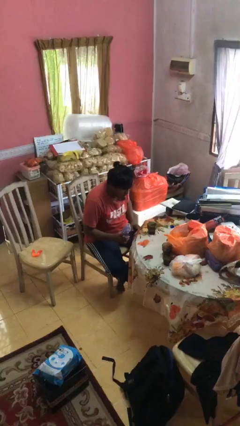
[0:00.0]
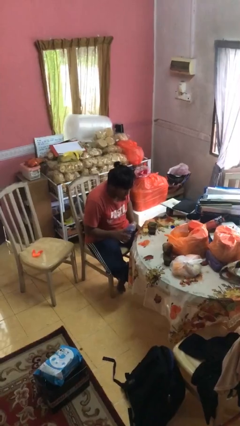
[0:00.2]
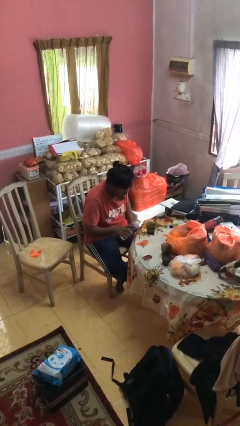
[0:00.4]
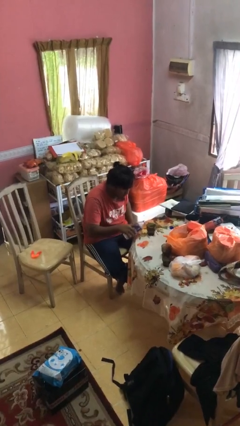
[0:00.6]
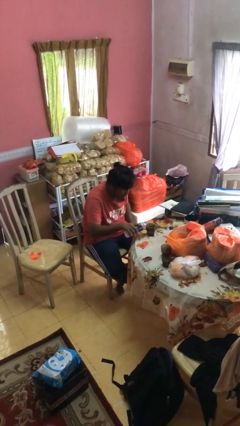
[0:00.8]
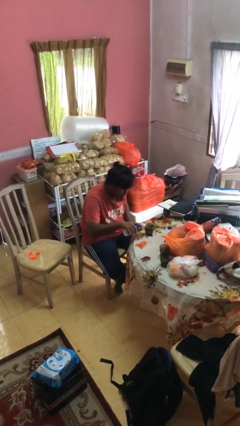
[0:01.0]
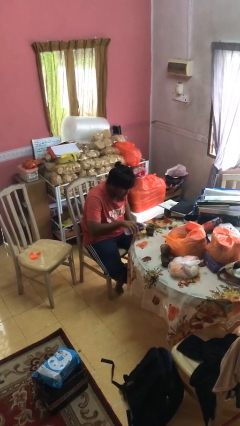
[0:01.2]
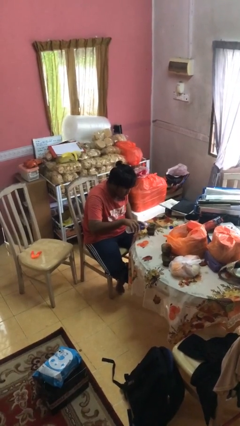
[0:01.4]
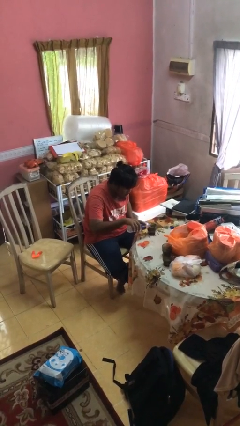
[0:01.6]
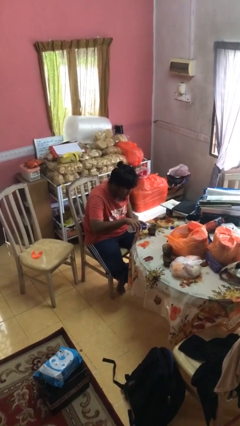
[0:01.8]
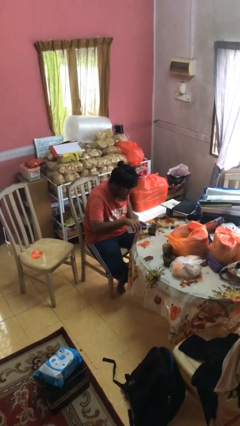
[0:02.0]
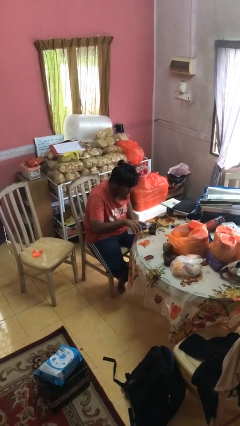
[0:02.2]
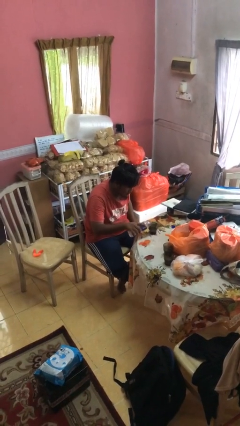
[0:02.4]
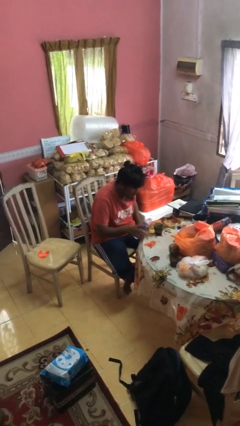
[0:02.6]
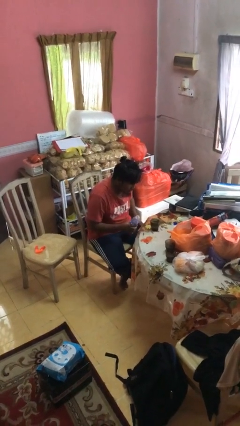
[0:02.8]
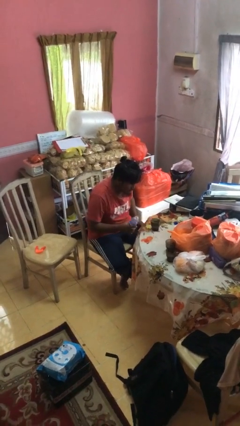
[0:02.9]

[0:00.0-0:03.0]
person pours liquid into cup

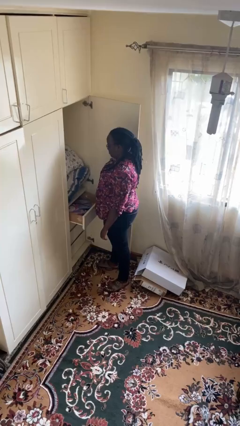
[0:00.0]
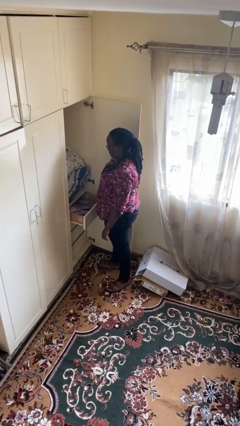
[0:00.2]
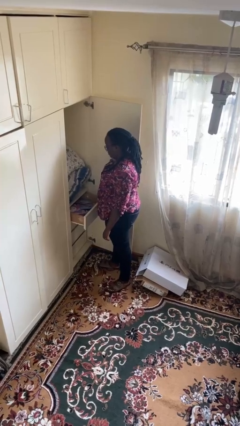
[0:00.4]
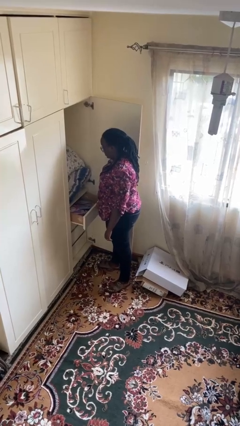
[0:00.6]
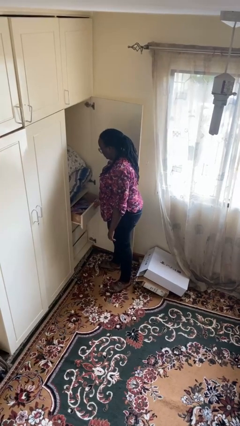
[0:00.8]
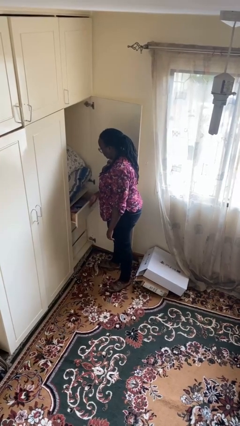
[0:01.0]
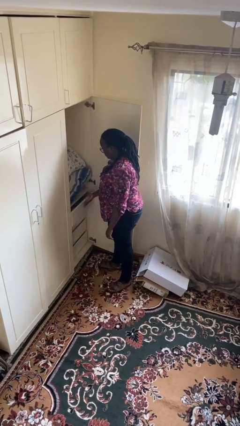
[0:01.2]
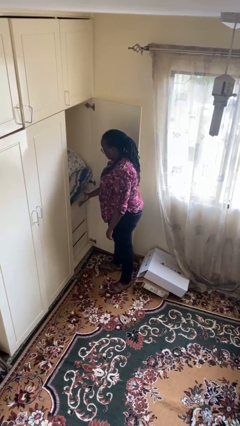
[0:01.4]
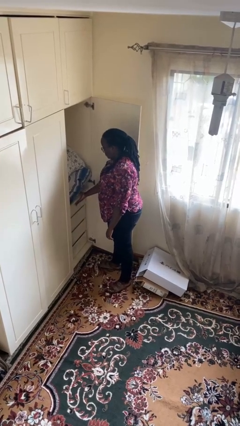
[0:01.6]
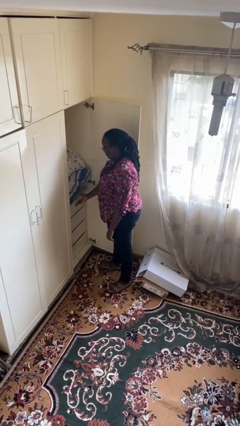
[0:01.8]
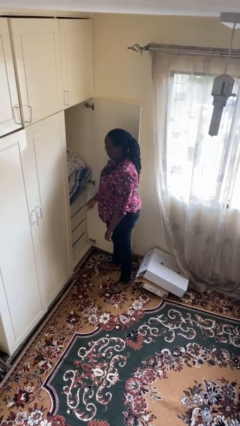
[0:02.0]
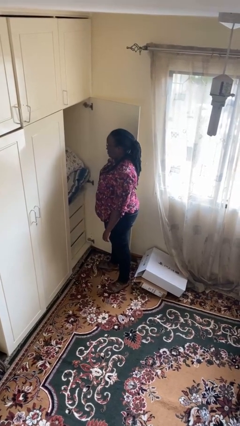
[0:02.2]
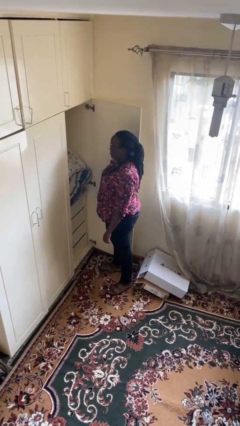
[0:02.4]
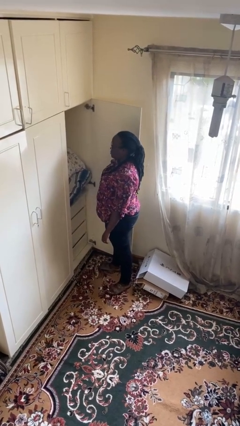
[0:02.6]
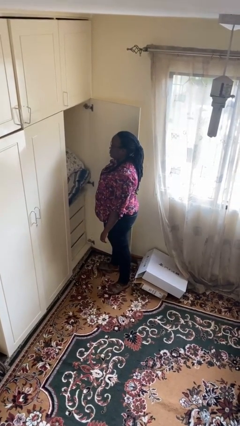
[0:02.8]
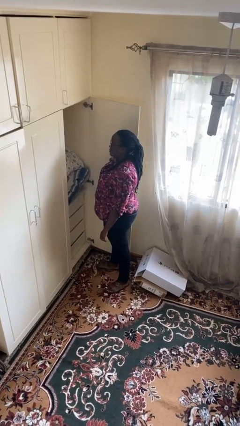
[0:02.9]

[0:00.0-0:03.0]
person closes dresser drawer

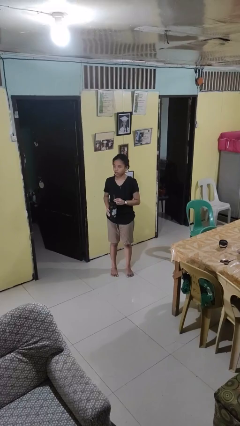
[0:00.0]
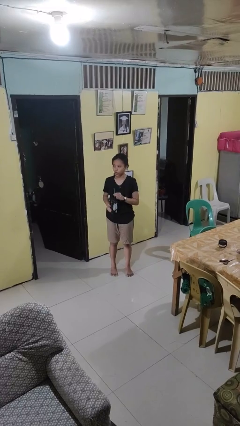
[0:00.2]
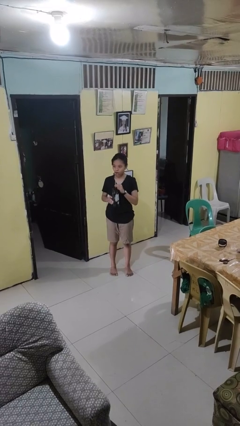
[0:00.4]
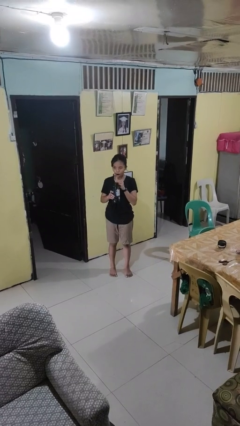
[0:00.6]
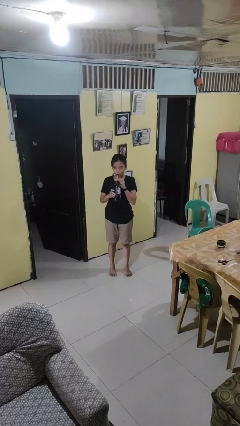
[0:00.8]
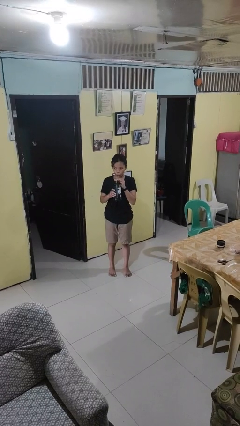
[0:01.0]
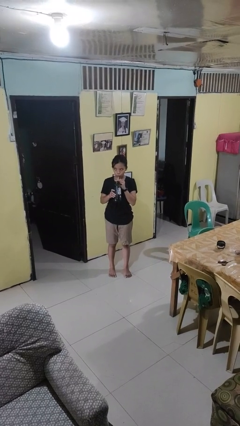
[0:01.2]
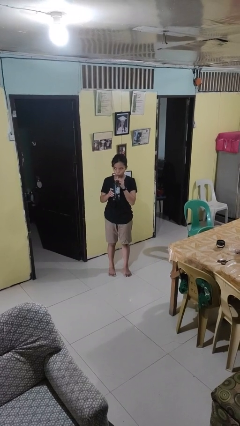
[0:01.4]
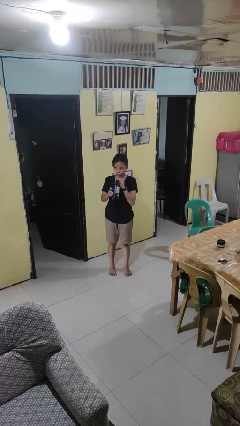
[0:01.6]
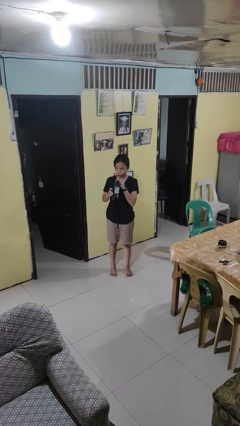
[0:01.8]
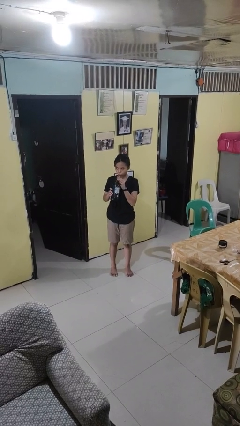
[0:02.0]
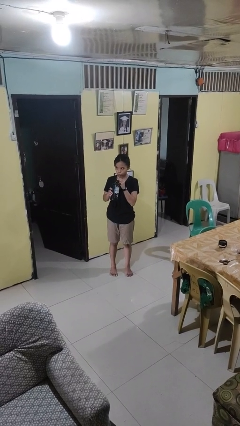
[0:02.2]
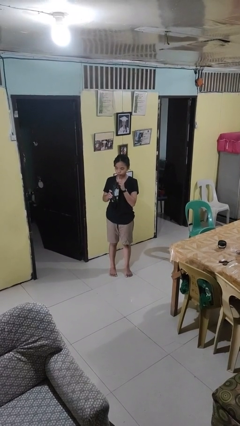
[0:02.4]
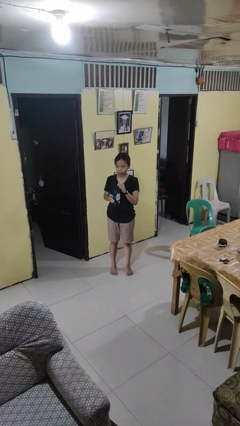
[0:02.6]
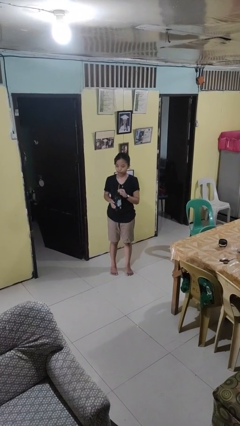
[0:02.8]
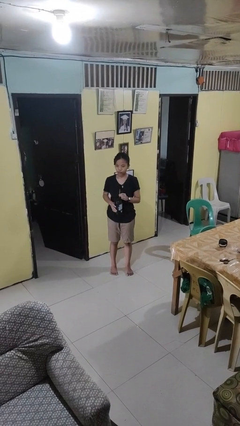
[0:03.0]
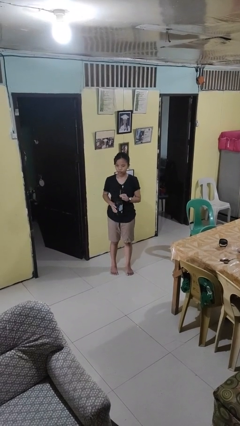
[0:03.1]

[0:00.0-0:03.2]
person drinks from straw

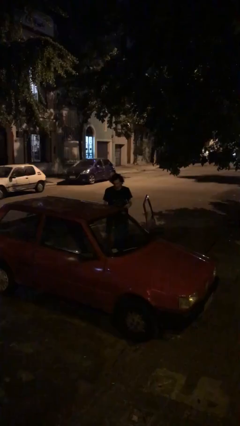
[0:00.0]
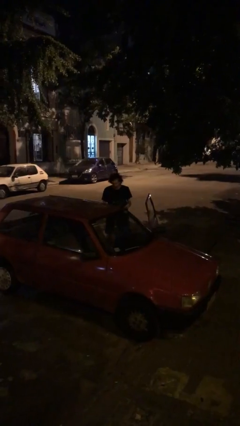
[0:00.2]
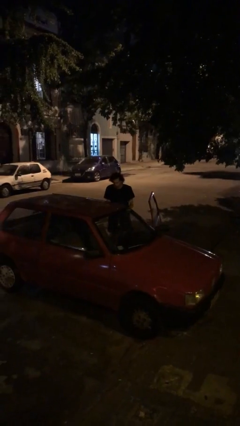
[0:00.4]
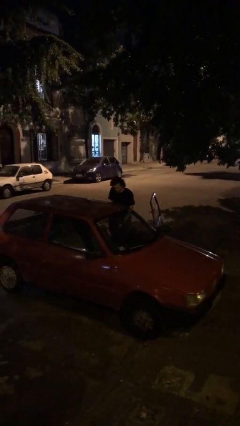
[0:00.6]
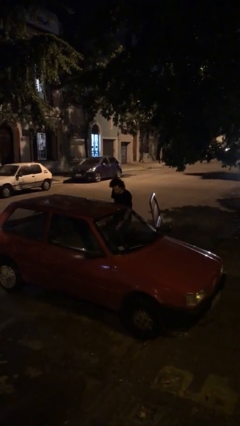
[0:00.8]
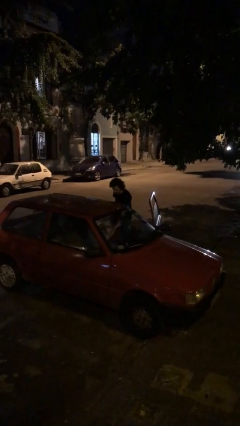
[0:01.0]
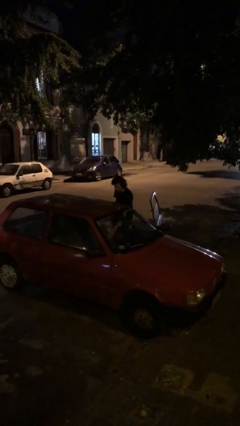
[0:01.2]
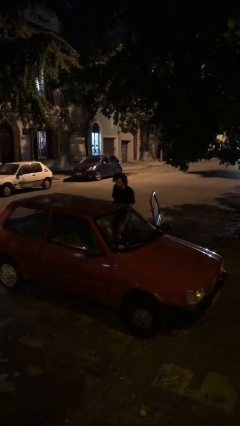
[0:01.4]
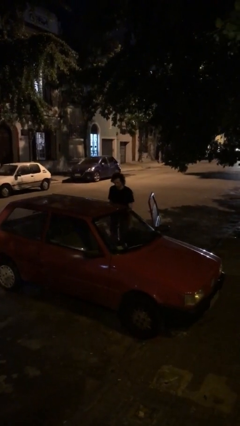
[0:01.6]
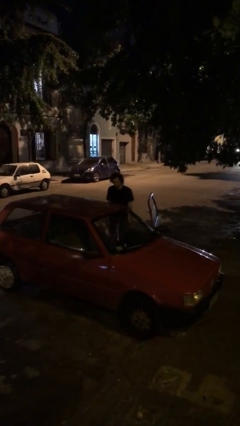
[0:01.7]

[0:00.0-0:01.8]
person loads car

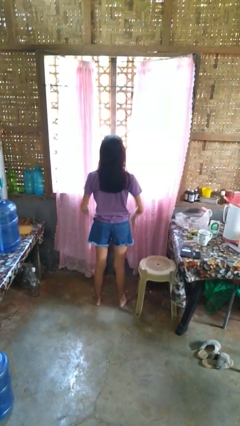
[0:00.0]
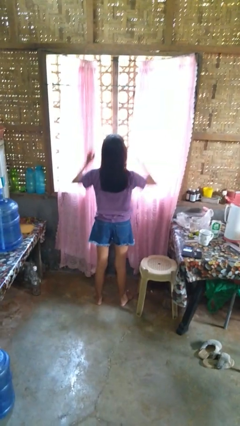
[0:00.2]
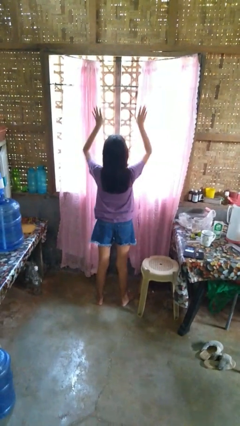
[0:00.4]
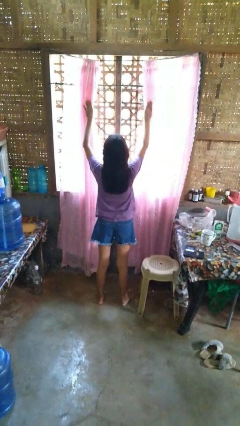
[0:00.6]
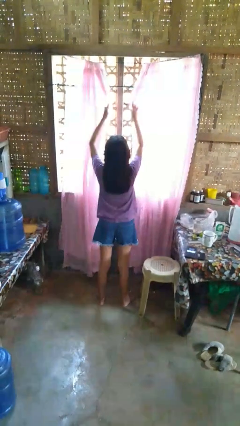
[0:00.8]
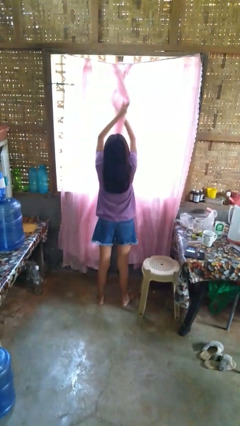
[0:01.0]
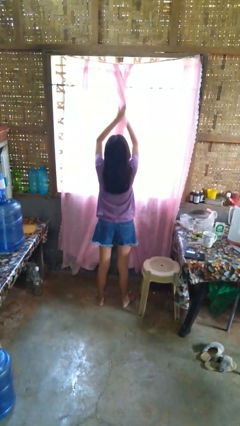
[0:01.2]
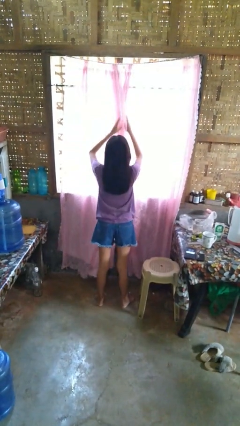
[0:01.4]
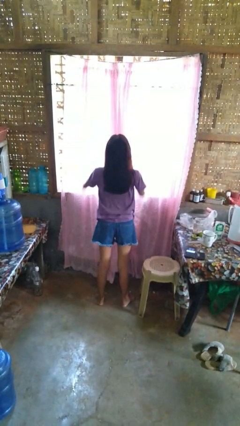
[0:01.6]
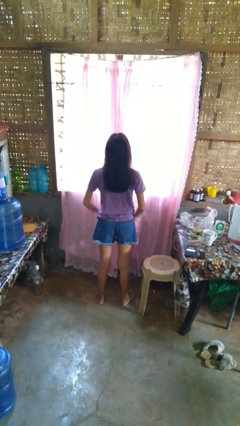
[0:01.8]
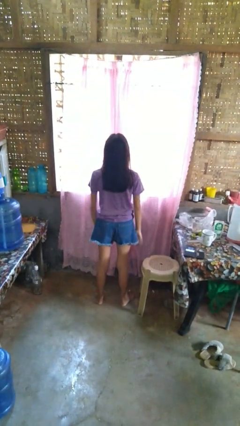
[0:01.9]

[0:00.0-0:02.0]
person closes curtains

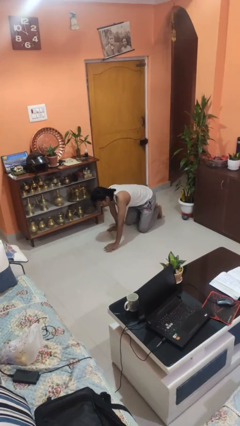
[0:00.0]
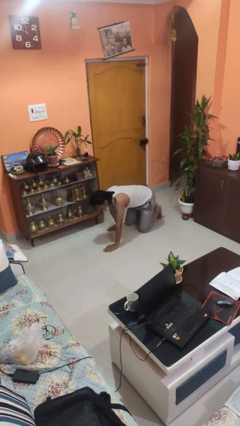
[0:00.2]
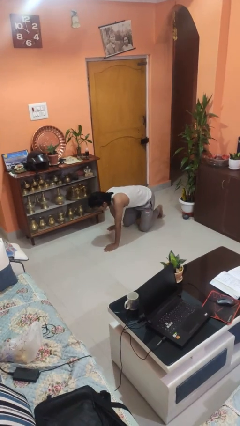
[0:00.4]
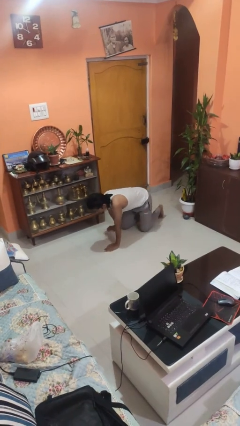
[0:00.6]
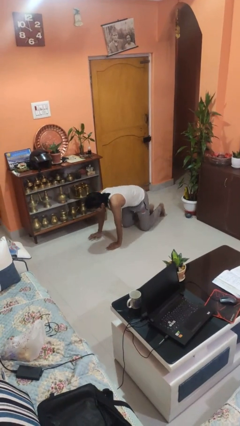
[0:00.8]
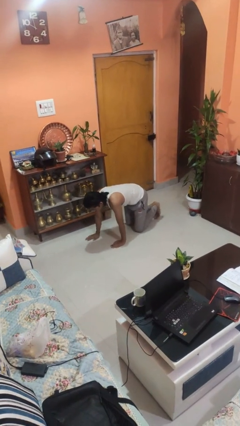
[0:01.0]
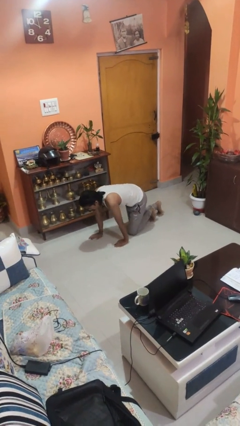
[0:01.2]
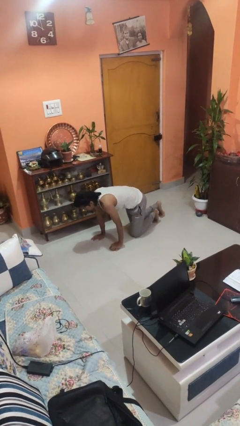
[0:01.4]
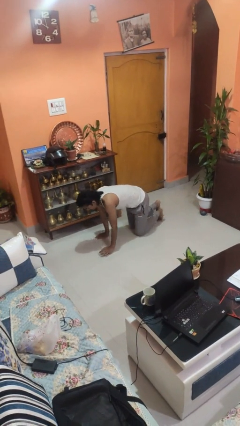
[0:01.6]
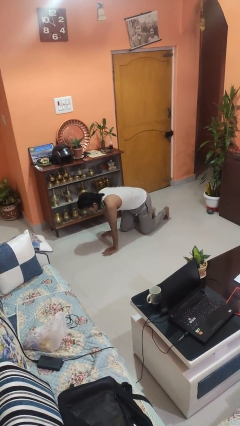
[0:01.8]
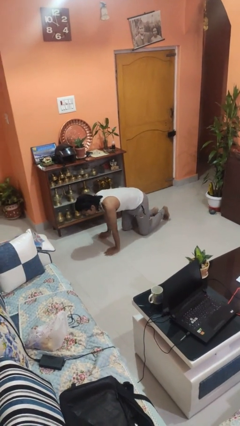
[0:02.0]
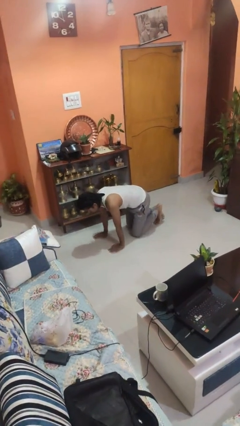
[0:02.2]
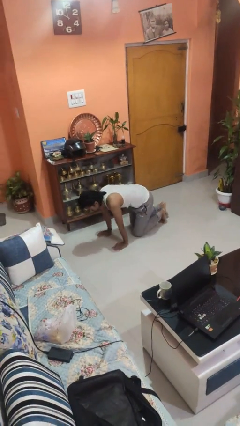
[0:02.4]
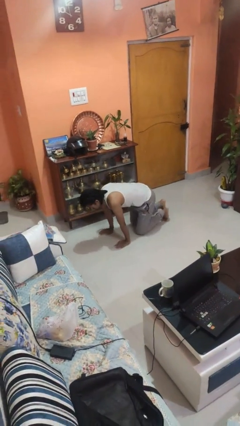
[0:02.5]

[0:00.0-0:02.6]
person crawls

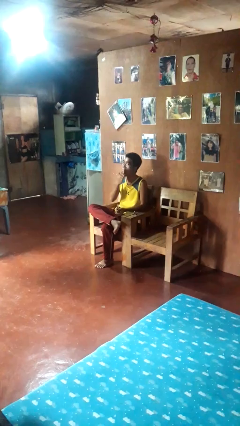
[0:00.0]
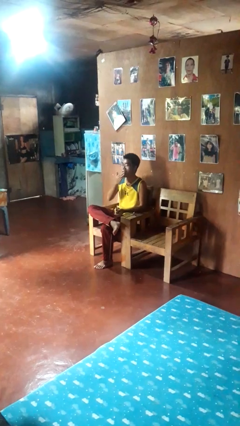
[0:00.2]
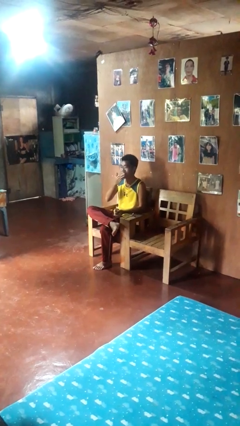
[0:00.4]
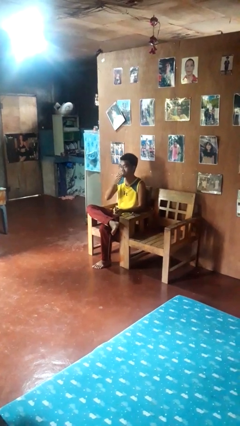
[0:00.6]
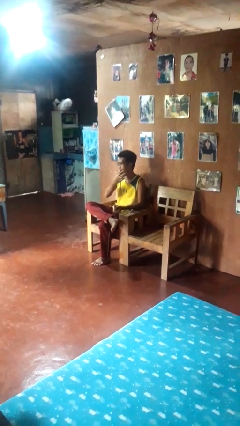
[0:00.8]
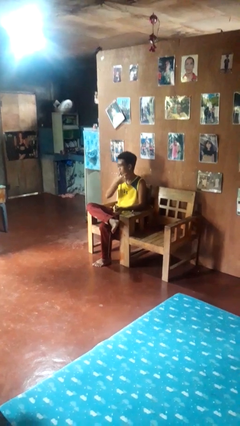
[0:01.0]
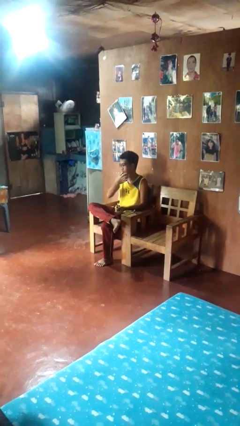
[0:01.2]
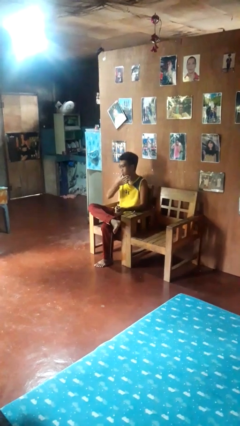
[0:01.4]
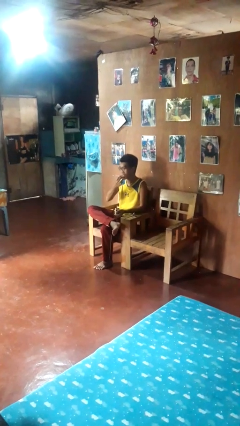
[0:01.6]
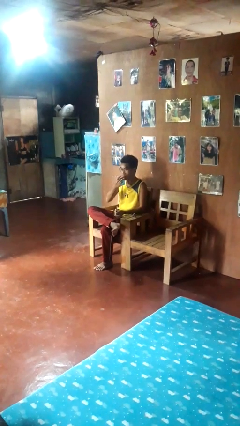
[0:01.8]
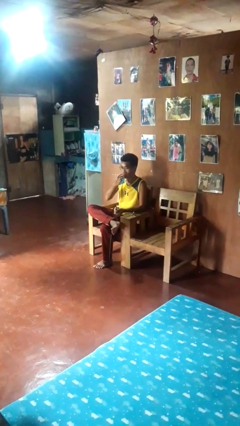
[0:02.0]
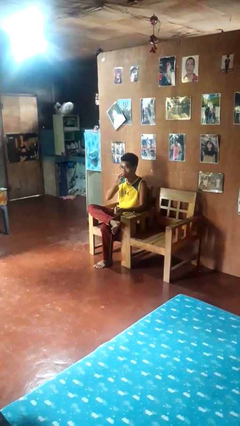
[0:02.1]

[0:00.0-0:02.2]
person licks fingers
